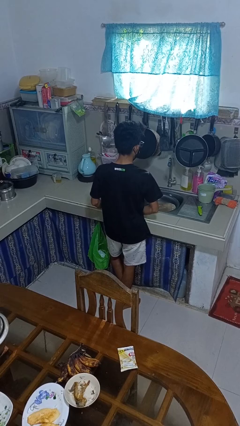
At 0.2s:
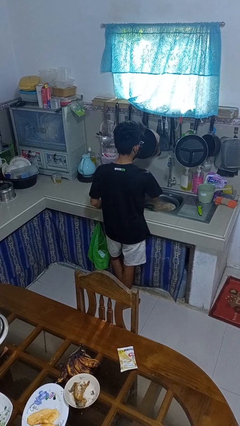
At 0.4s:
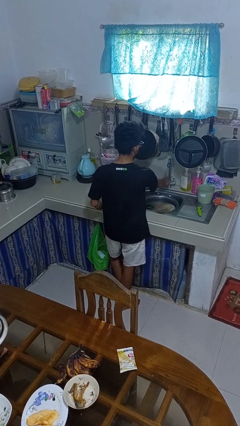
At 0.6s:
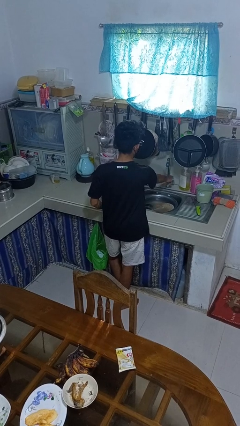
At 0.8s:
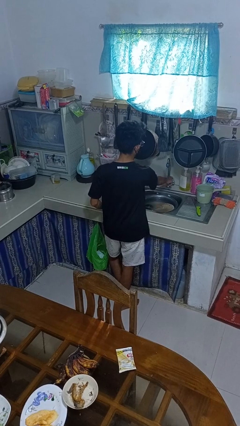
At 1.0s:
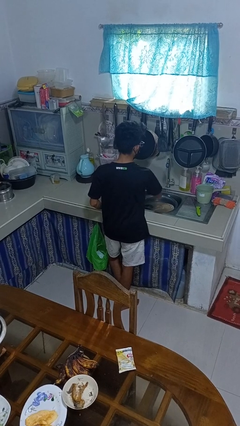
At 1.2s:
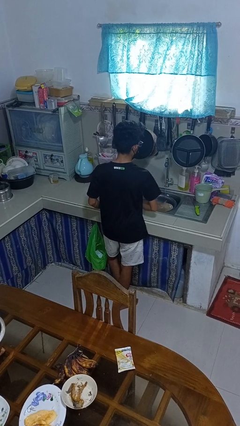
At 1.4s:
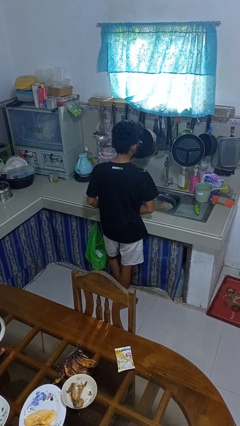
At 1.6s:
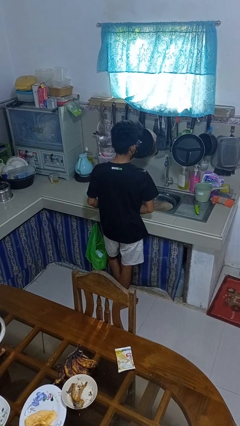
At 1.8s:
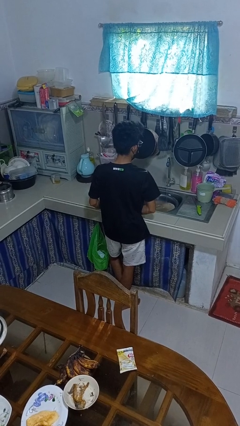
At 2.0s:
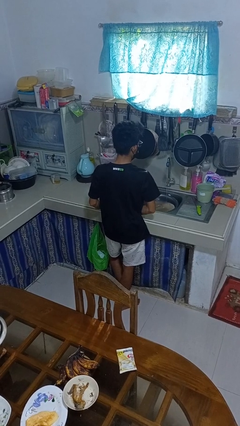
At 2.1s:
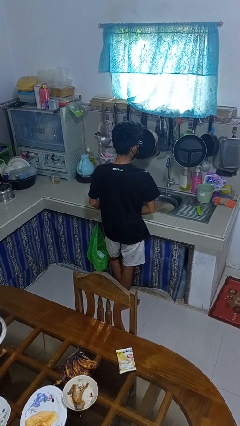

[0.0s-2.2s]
person turns on faucet

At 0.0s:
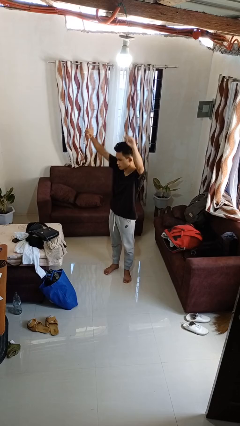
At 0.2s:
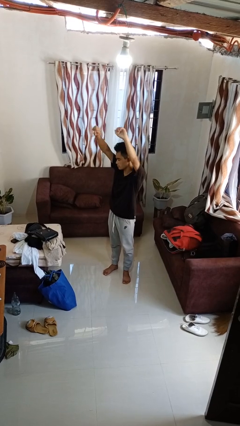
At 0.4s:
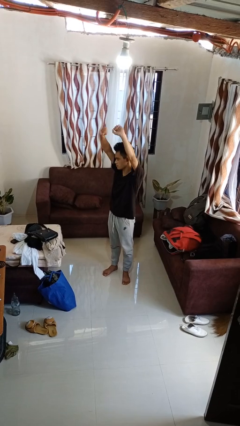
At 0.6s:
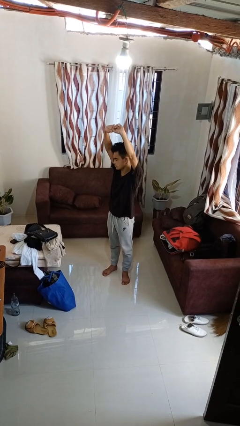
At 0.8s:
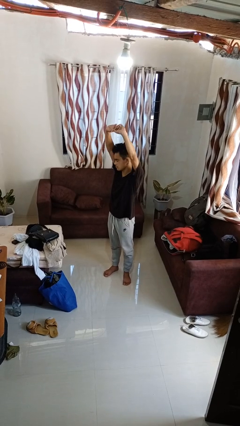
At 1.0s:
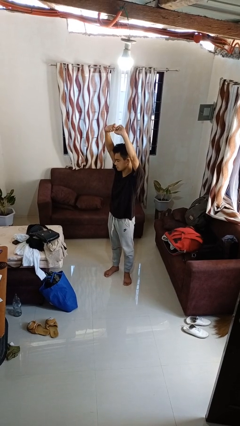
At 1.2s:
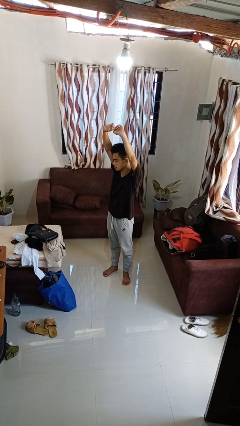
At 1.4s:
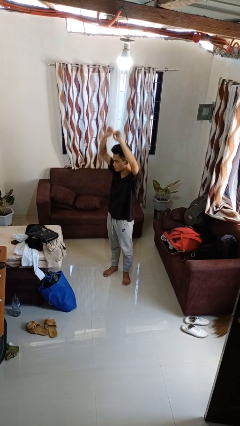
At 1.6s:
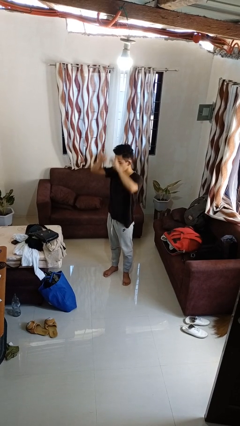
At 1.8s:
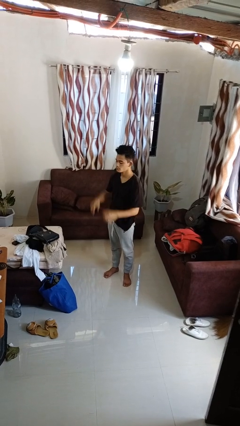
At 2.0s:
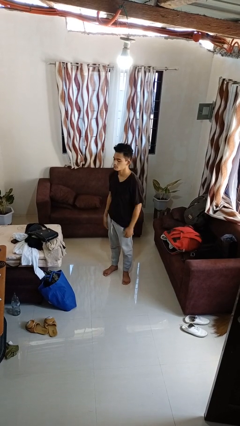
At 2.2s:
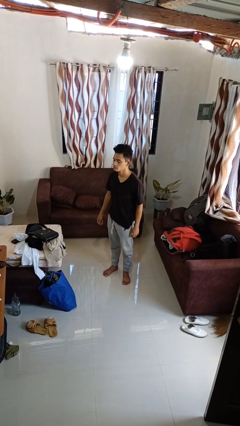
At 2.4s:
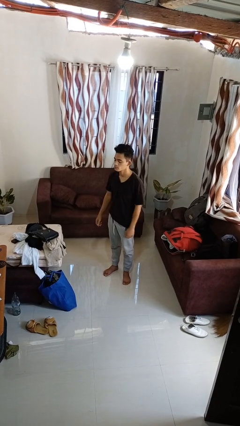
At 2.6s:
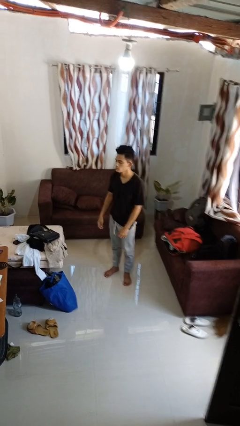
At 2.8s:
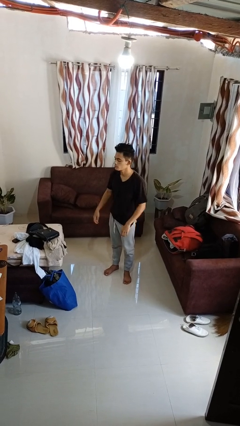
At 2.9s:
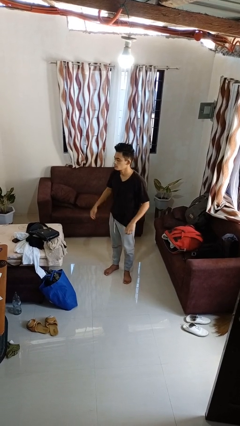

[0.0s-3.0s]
person stretches arms over head

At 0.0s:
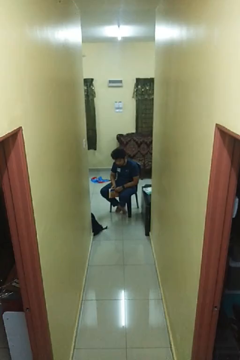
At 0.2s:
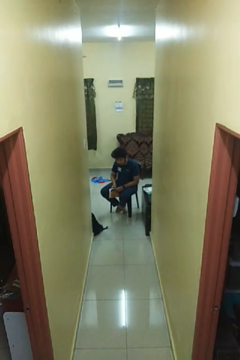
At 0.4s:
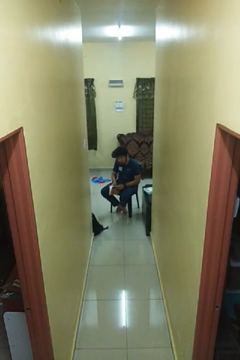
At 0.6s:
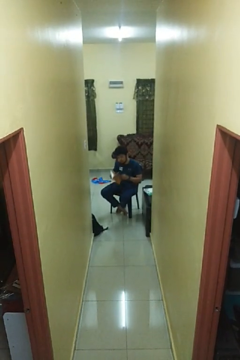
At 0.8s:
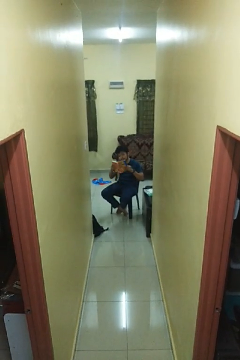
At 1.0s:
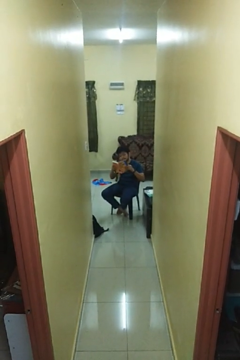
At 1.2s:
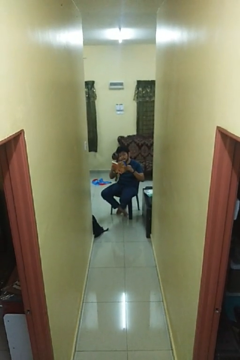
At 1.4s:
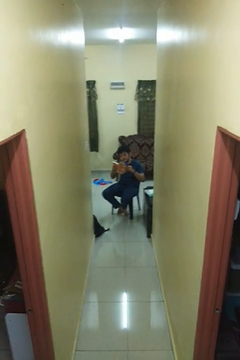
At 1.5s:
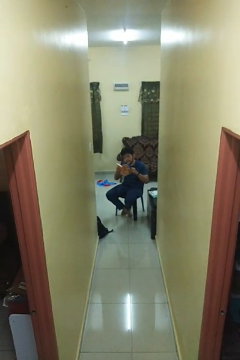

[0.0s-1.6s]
person reads book

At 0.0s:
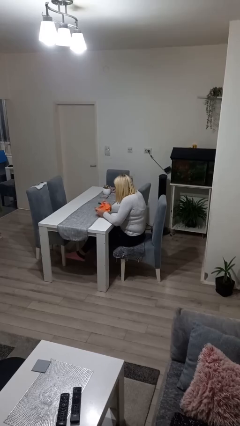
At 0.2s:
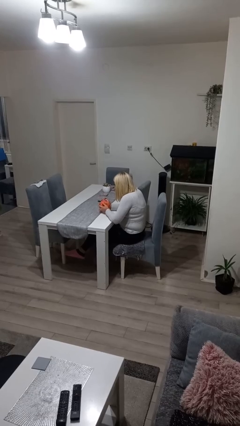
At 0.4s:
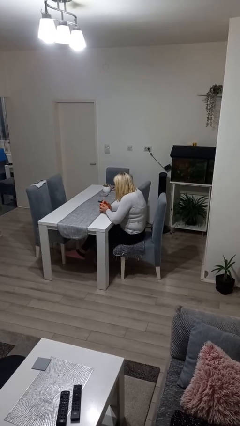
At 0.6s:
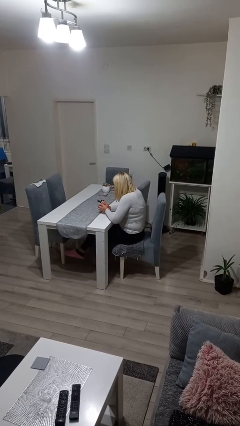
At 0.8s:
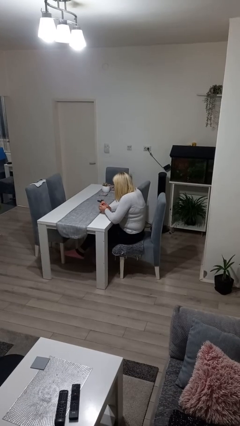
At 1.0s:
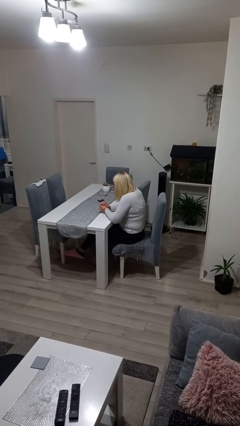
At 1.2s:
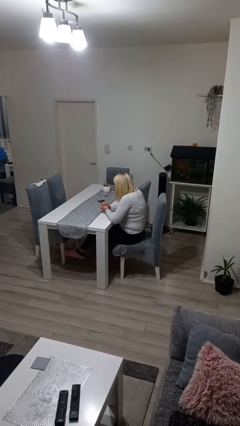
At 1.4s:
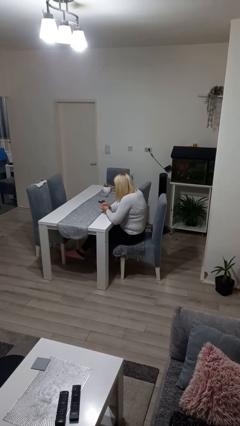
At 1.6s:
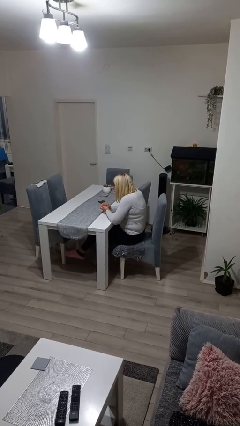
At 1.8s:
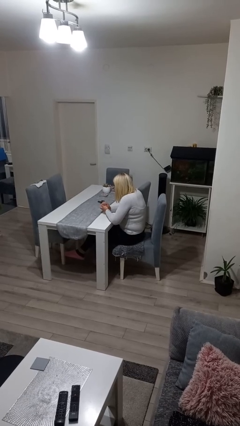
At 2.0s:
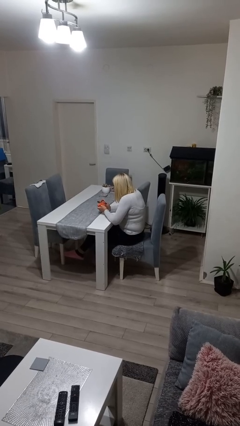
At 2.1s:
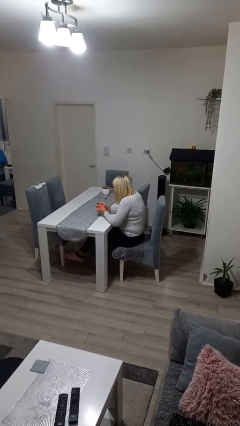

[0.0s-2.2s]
person crumples paper

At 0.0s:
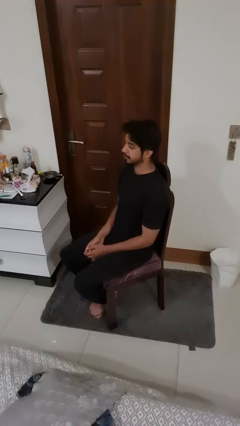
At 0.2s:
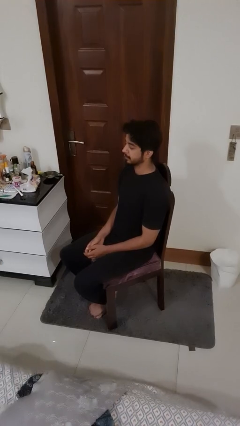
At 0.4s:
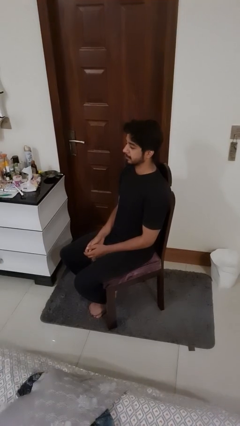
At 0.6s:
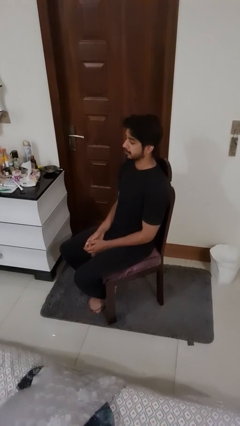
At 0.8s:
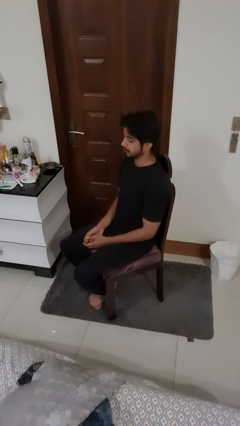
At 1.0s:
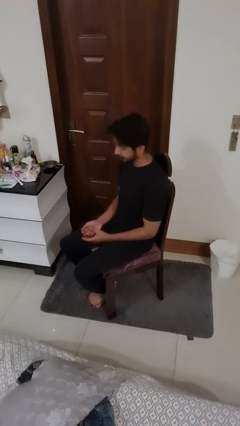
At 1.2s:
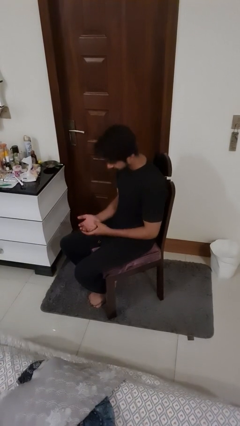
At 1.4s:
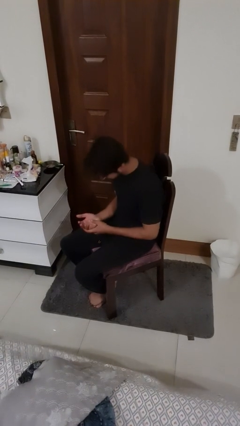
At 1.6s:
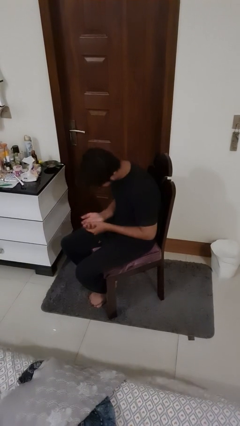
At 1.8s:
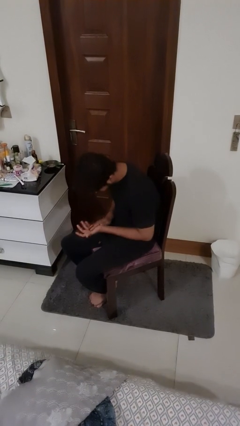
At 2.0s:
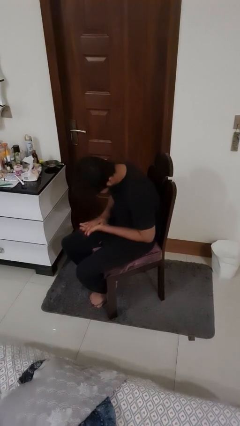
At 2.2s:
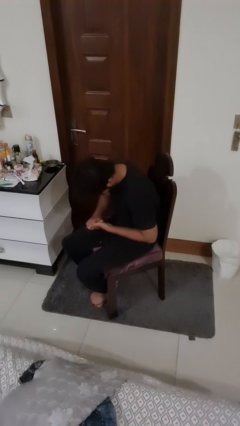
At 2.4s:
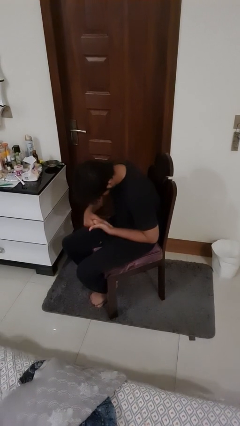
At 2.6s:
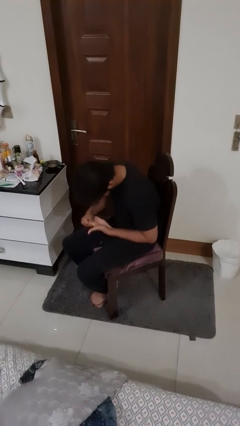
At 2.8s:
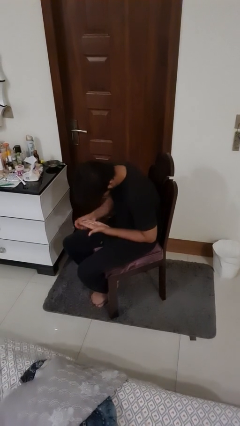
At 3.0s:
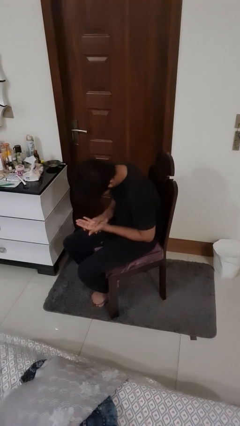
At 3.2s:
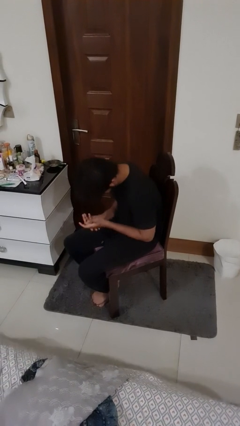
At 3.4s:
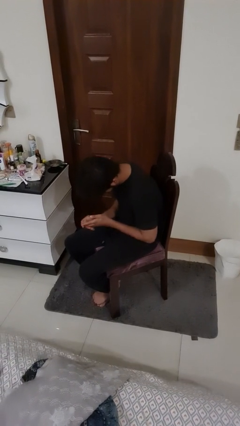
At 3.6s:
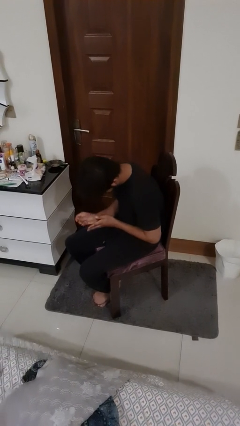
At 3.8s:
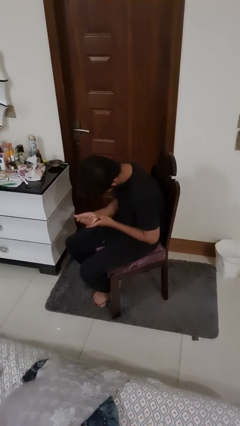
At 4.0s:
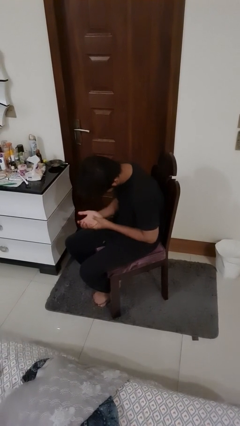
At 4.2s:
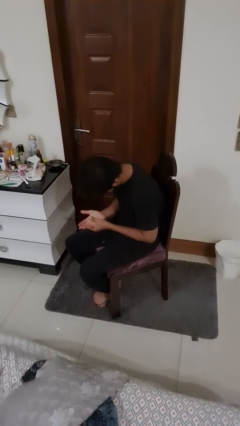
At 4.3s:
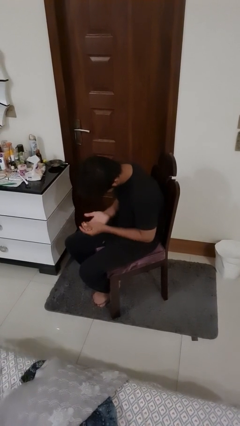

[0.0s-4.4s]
person looks at hands in lap

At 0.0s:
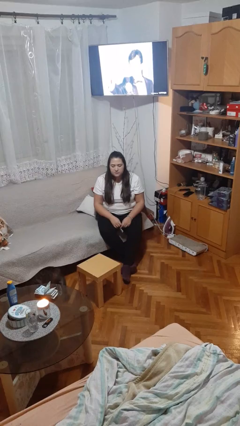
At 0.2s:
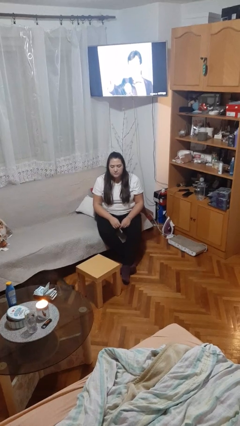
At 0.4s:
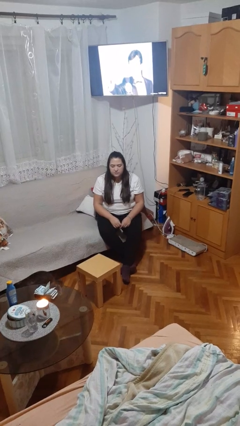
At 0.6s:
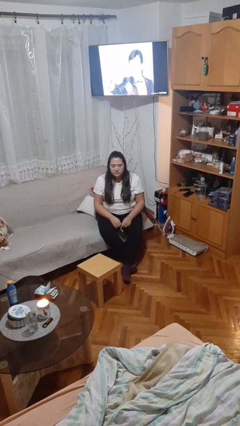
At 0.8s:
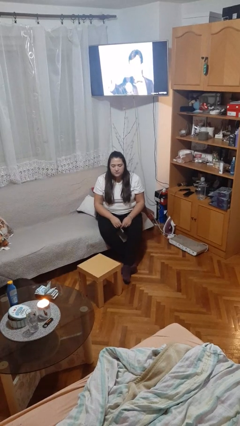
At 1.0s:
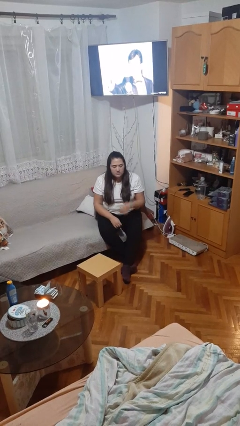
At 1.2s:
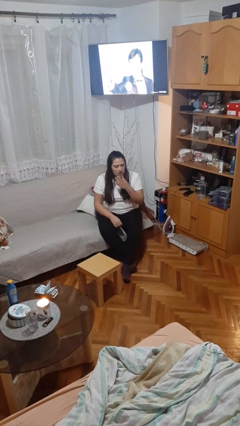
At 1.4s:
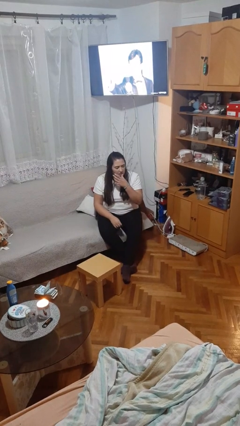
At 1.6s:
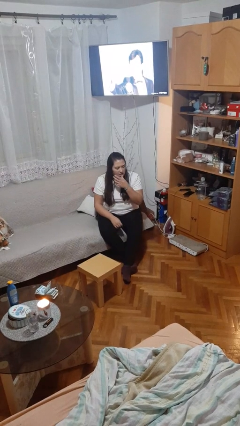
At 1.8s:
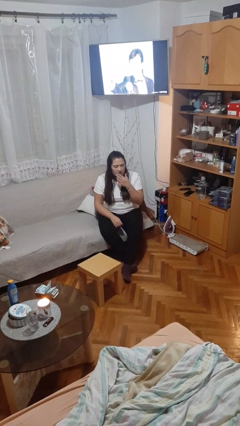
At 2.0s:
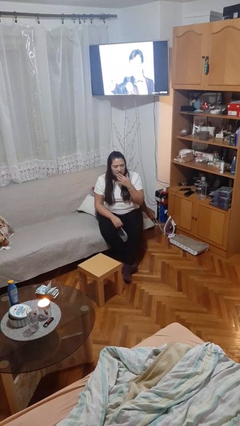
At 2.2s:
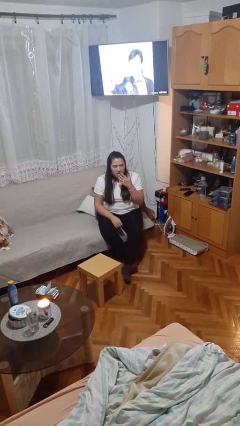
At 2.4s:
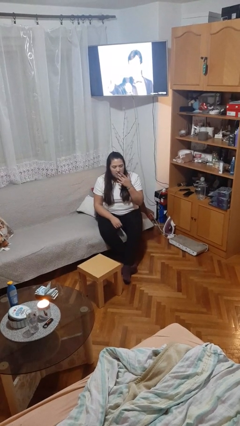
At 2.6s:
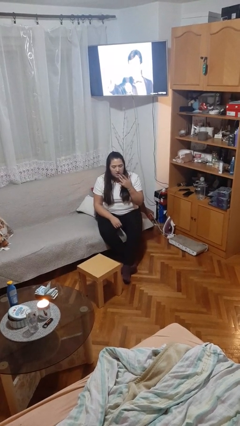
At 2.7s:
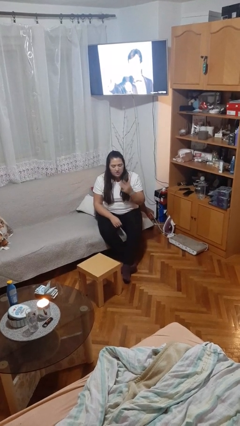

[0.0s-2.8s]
person licks fingers

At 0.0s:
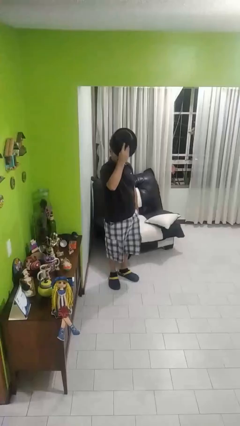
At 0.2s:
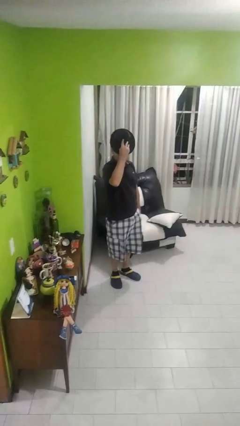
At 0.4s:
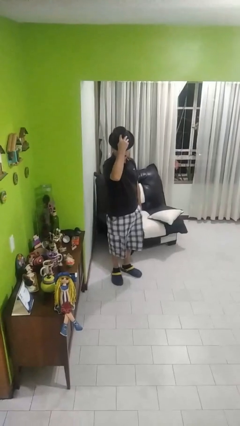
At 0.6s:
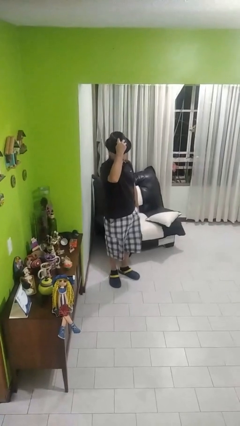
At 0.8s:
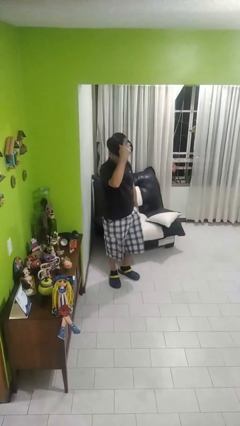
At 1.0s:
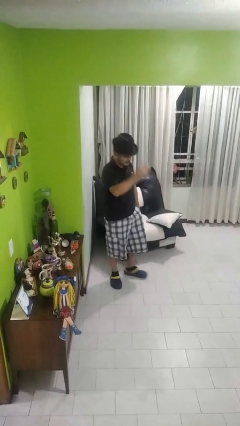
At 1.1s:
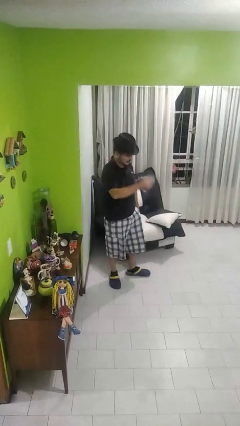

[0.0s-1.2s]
person puts on hat

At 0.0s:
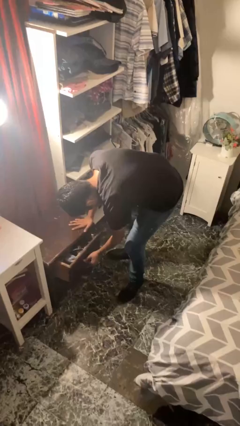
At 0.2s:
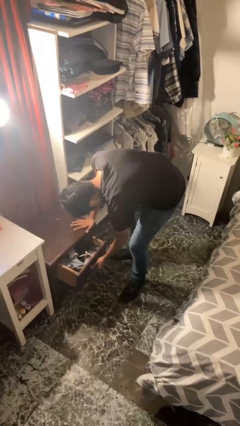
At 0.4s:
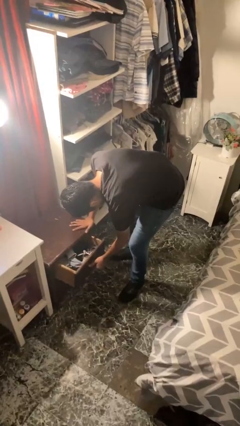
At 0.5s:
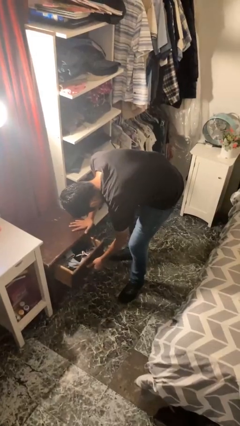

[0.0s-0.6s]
person opens dresser drawer
